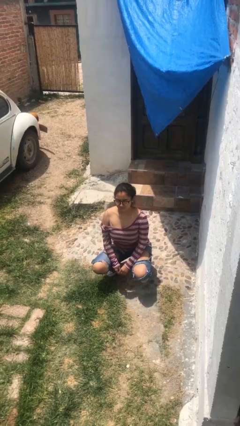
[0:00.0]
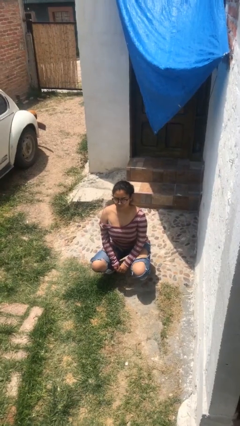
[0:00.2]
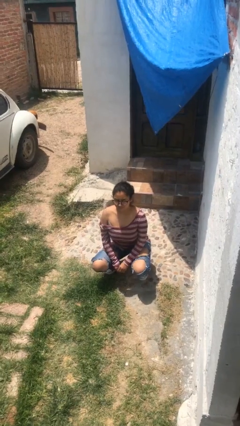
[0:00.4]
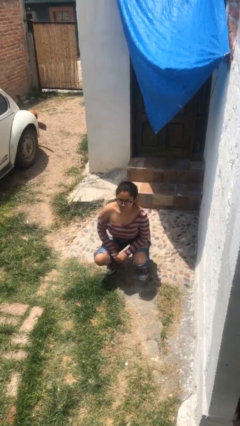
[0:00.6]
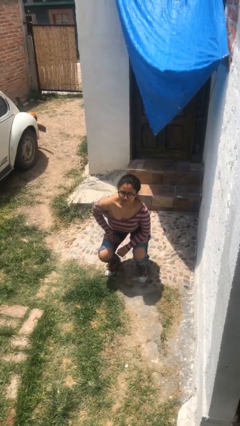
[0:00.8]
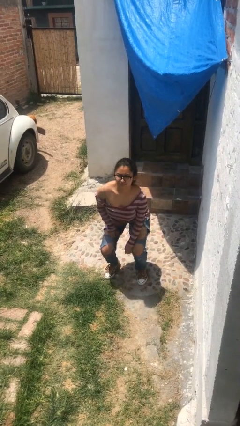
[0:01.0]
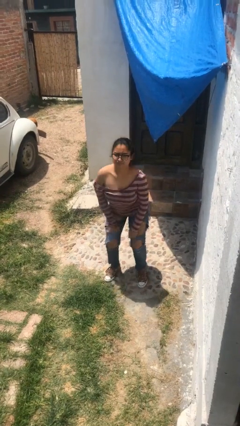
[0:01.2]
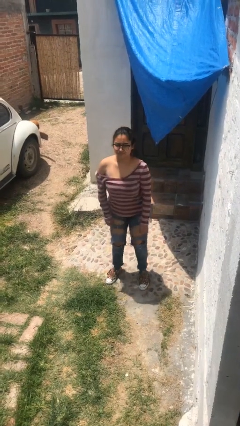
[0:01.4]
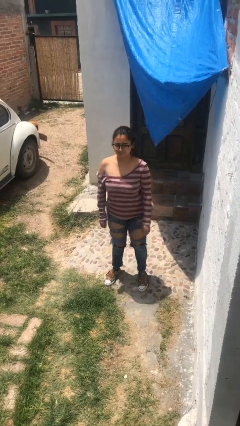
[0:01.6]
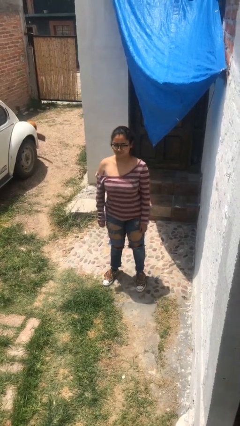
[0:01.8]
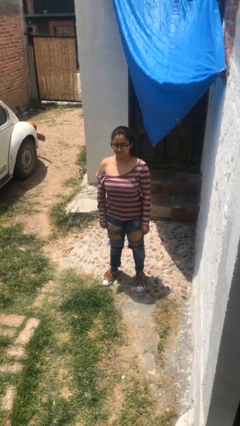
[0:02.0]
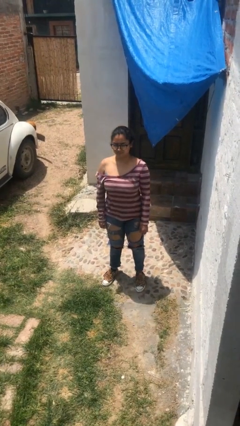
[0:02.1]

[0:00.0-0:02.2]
person stands up

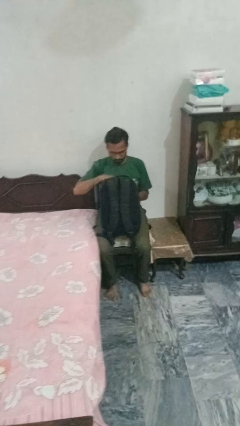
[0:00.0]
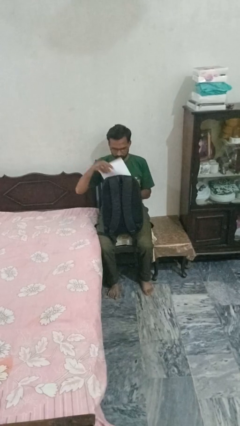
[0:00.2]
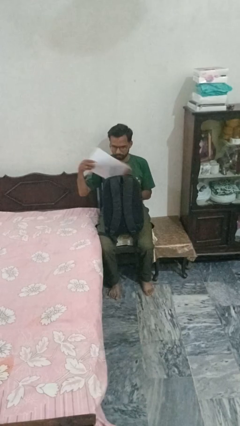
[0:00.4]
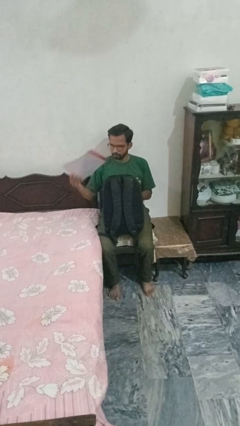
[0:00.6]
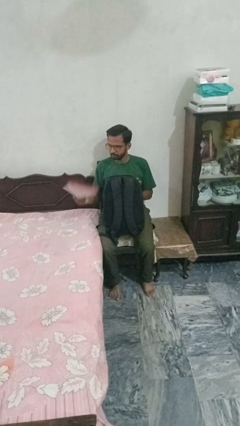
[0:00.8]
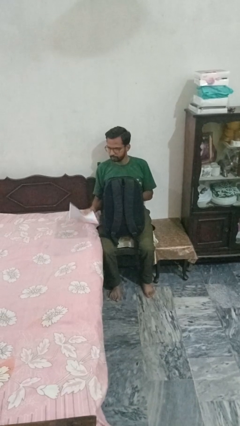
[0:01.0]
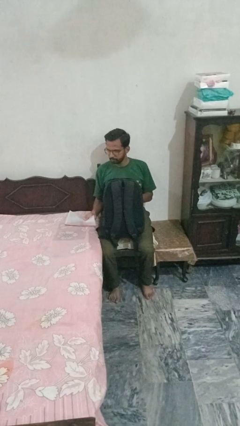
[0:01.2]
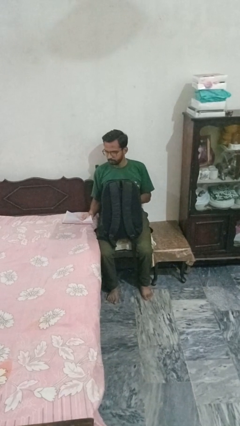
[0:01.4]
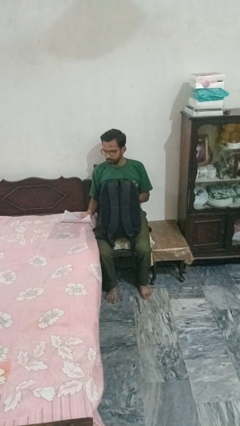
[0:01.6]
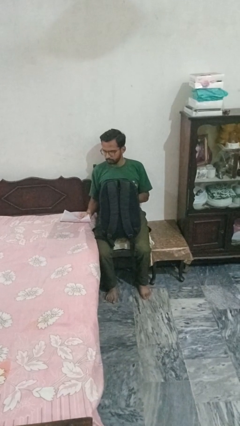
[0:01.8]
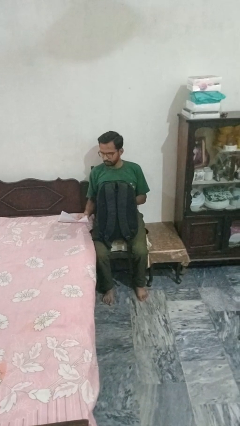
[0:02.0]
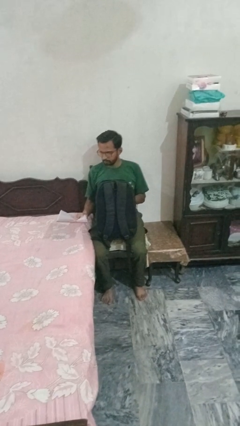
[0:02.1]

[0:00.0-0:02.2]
person takes object from backpack

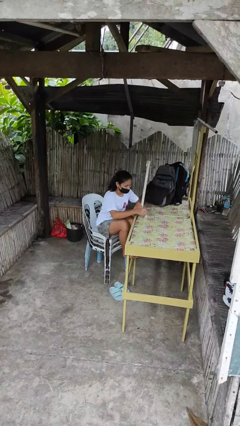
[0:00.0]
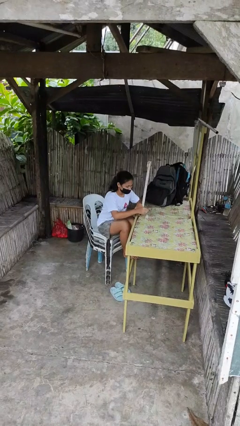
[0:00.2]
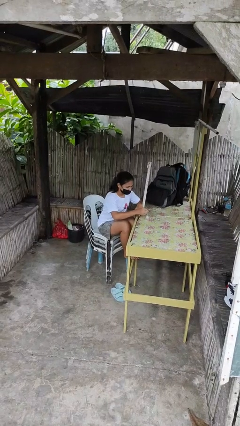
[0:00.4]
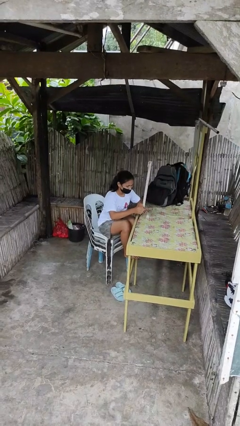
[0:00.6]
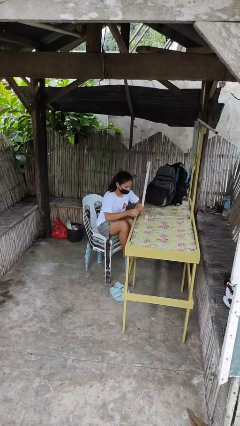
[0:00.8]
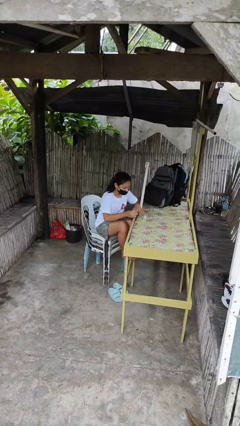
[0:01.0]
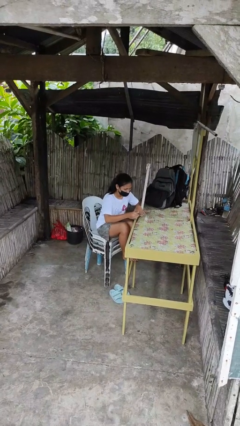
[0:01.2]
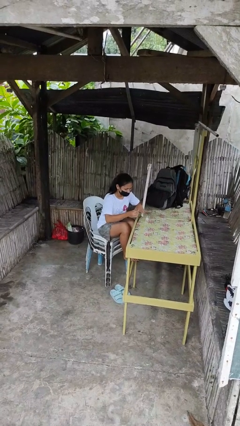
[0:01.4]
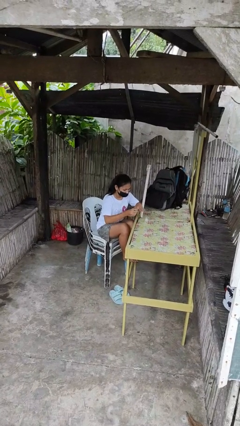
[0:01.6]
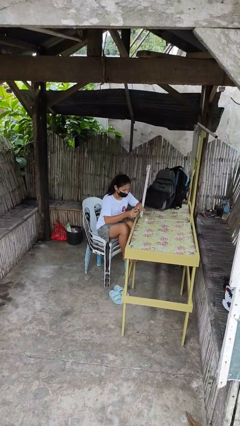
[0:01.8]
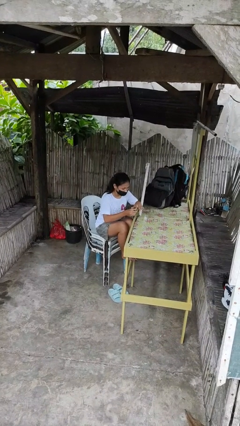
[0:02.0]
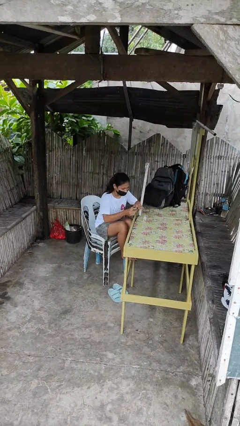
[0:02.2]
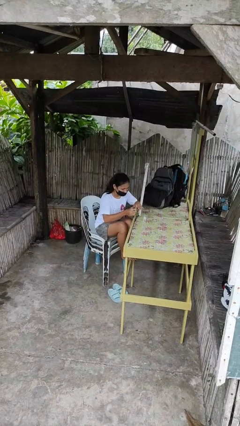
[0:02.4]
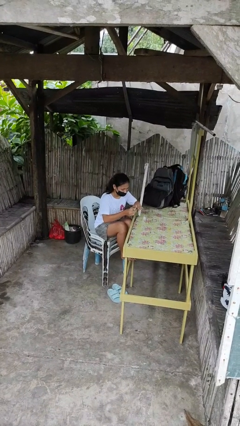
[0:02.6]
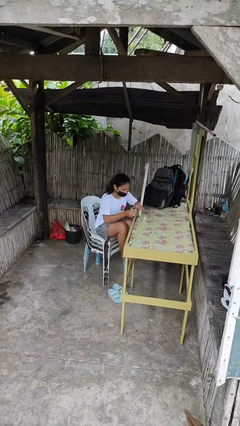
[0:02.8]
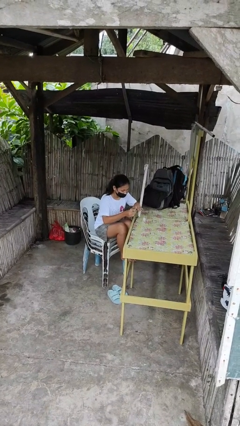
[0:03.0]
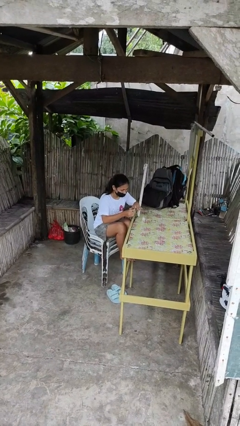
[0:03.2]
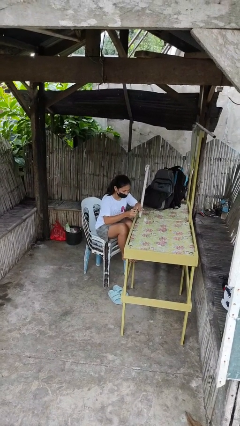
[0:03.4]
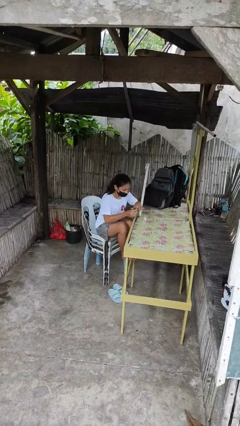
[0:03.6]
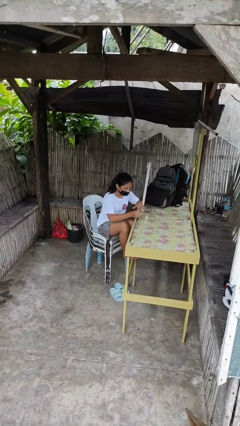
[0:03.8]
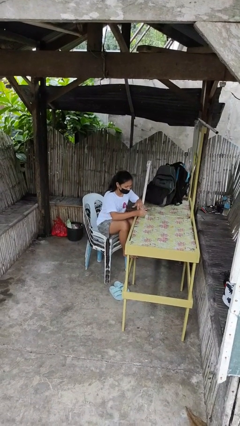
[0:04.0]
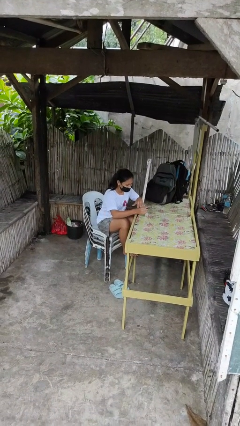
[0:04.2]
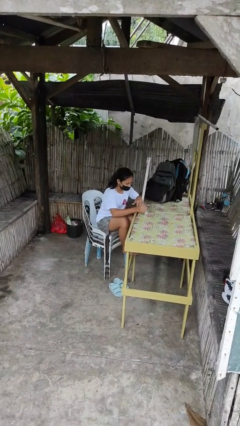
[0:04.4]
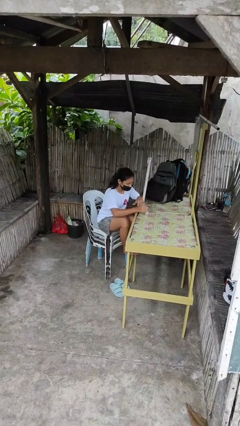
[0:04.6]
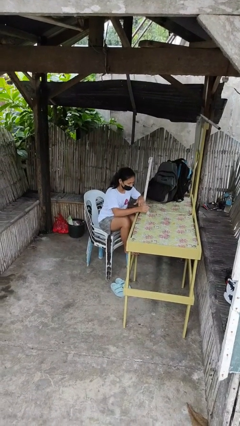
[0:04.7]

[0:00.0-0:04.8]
person paints fingernails

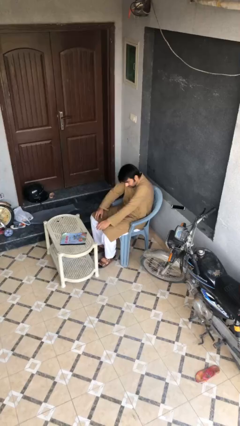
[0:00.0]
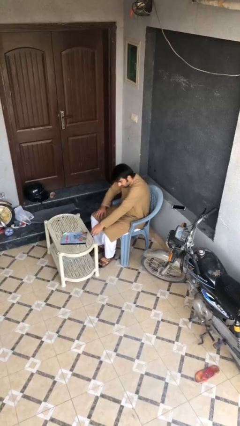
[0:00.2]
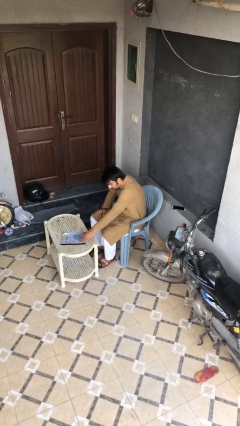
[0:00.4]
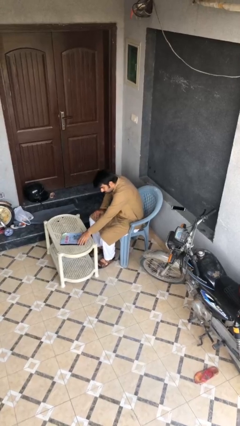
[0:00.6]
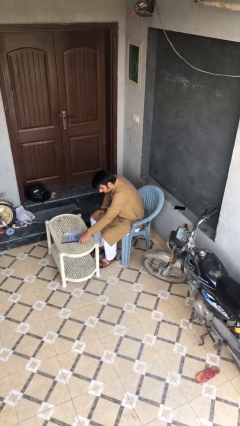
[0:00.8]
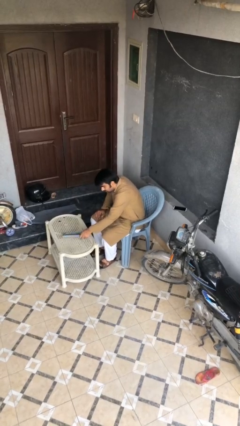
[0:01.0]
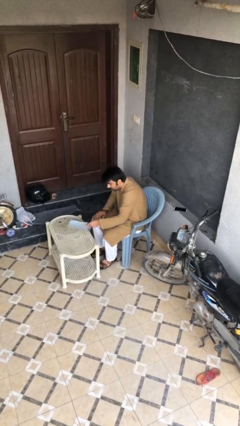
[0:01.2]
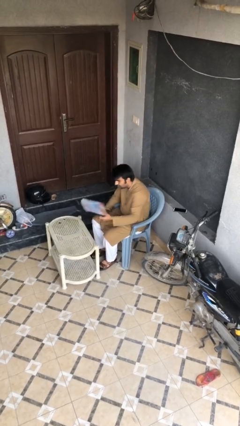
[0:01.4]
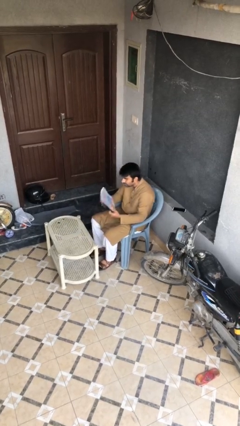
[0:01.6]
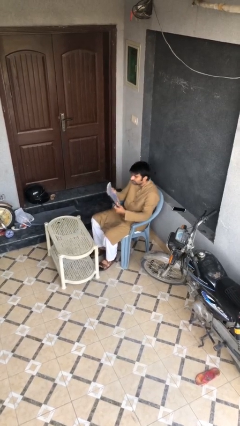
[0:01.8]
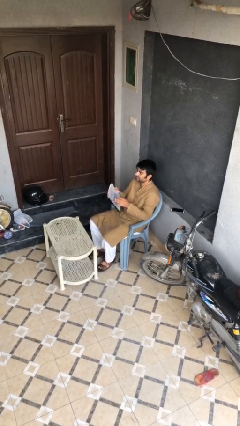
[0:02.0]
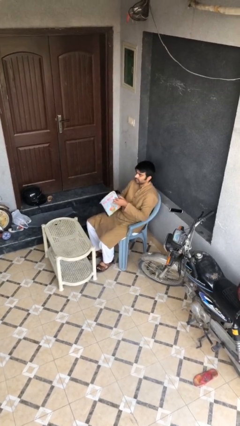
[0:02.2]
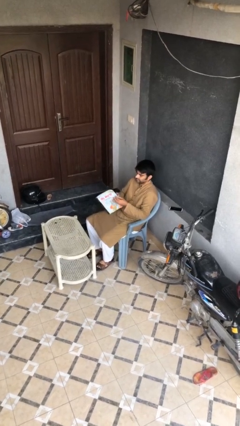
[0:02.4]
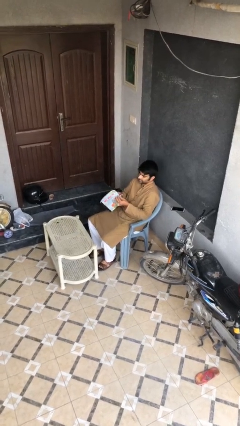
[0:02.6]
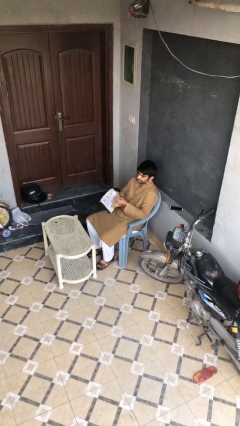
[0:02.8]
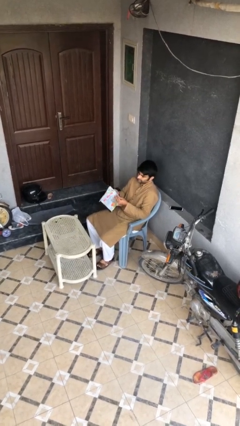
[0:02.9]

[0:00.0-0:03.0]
person picks up object from table

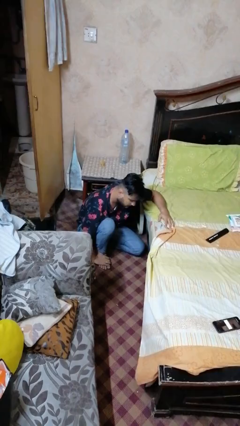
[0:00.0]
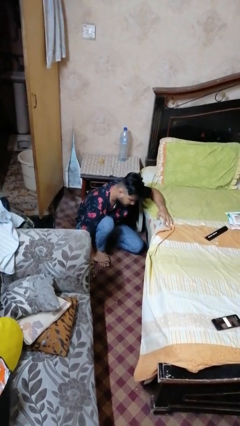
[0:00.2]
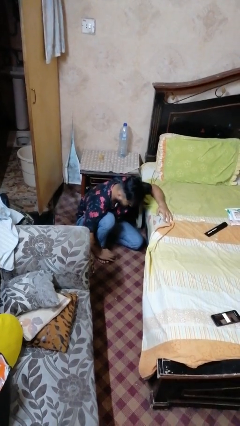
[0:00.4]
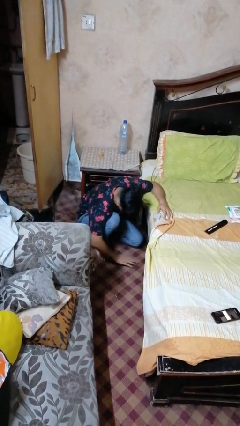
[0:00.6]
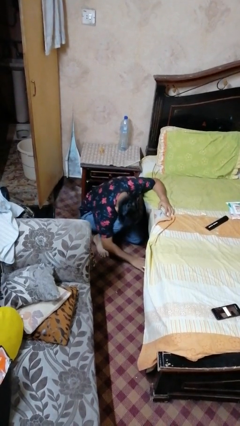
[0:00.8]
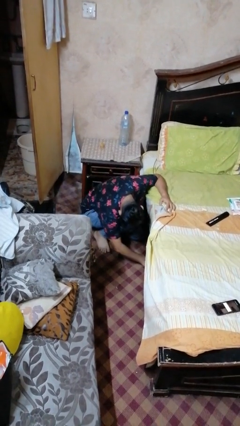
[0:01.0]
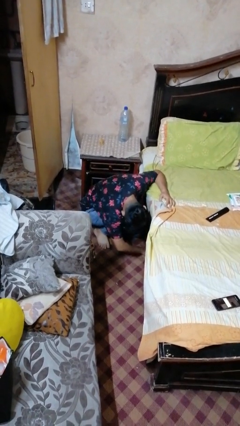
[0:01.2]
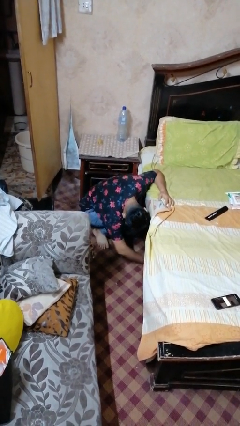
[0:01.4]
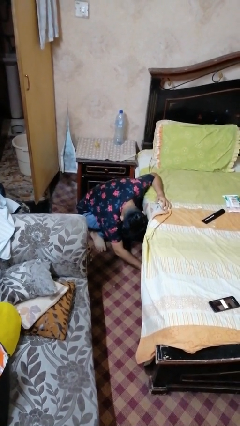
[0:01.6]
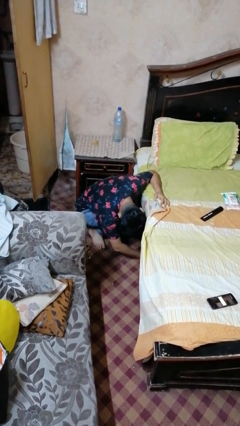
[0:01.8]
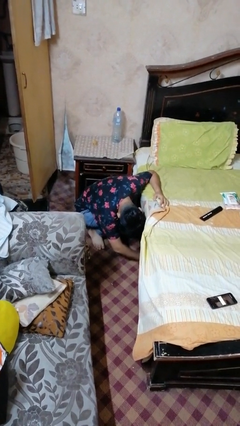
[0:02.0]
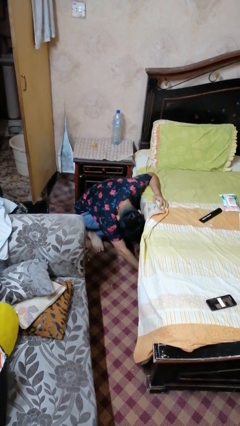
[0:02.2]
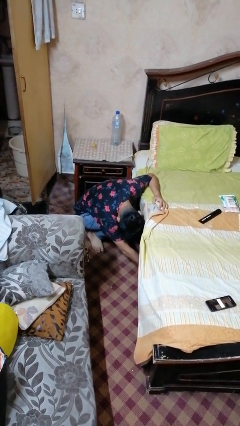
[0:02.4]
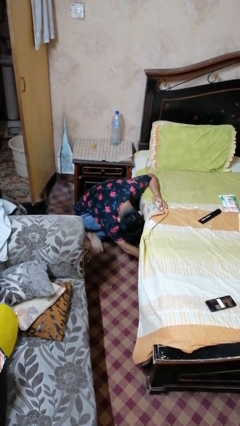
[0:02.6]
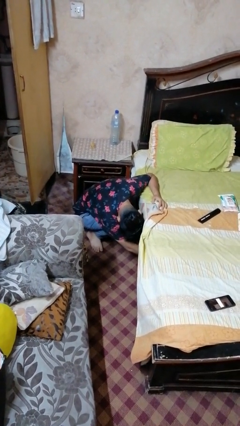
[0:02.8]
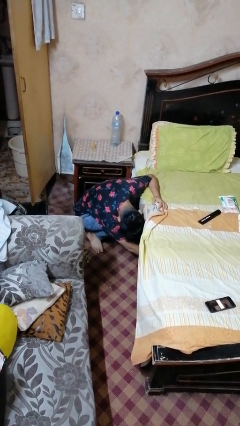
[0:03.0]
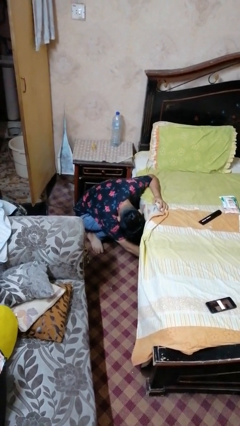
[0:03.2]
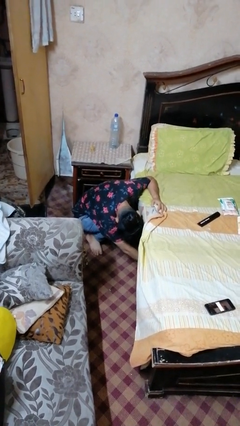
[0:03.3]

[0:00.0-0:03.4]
person searches under bed

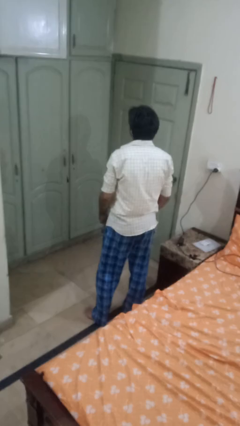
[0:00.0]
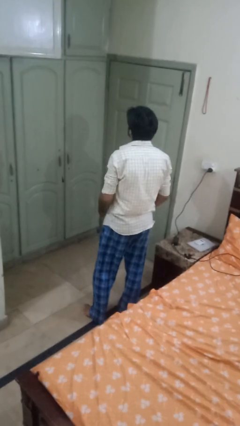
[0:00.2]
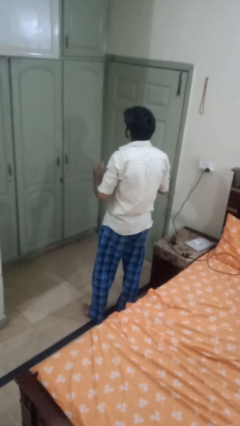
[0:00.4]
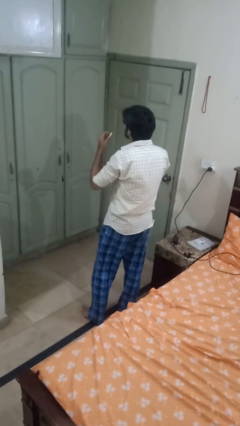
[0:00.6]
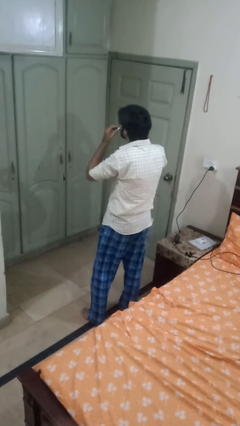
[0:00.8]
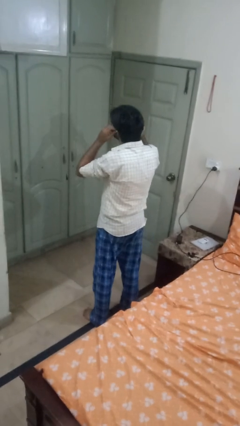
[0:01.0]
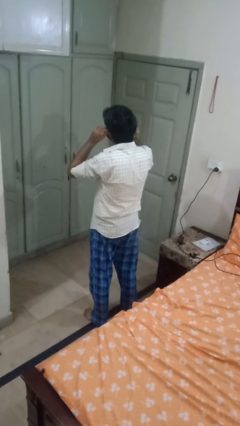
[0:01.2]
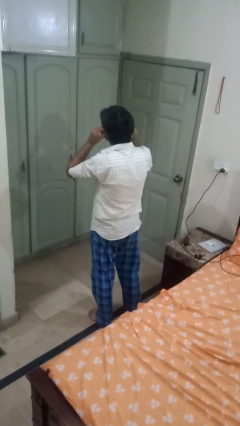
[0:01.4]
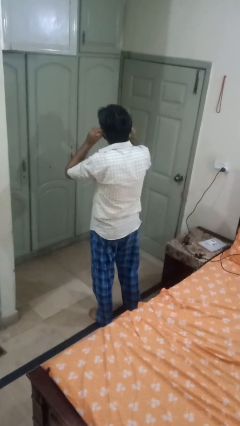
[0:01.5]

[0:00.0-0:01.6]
person puts on headphones

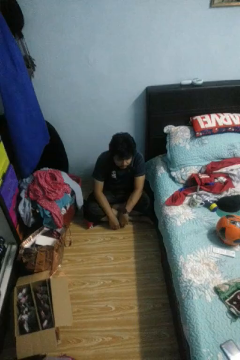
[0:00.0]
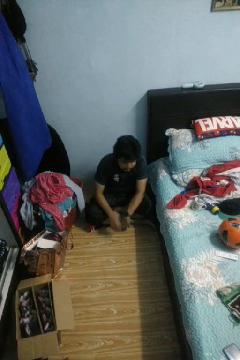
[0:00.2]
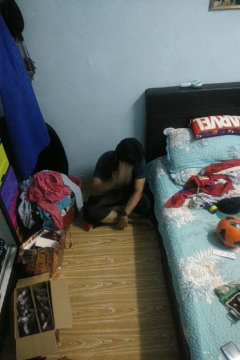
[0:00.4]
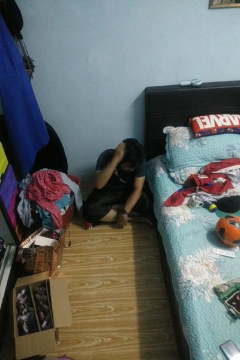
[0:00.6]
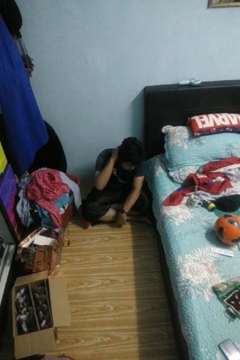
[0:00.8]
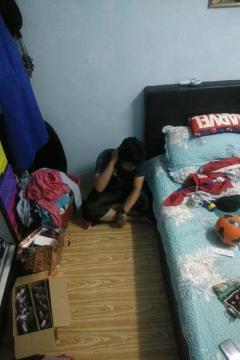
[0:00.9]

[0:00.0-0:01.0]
person strokes hair
